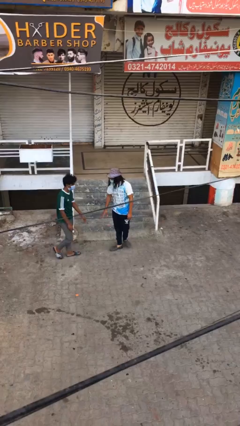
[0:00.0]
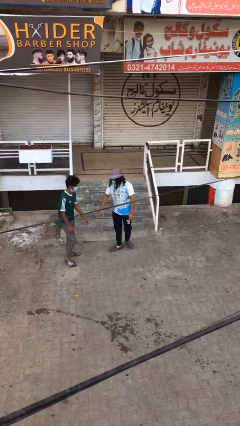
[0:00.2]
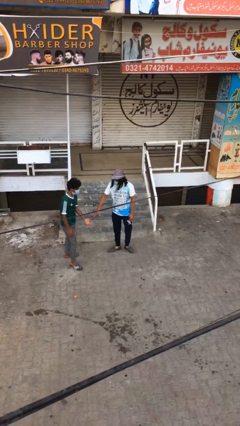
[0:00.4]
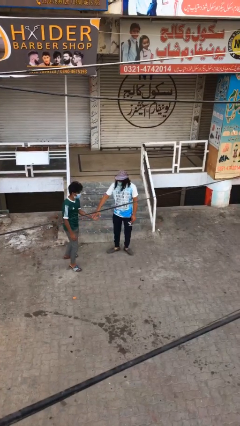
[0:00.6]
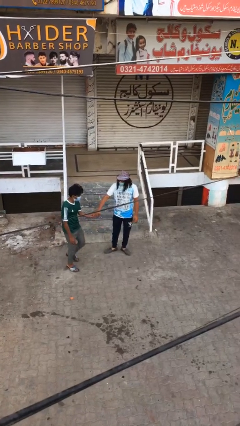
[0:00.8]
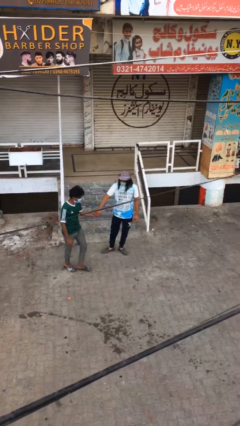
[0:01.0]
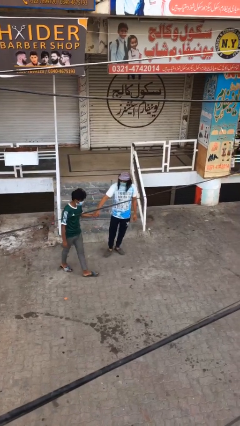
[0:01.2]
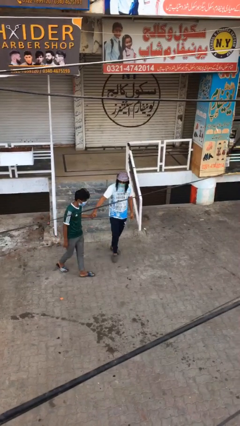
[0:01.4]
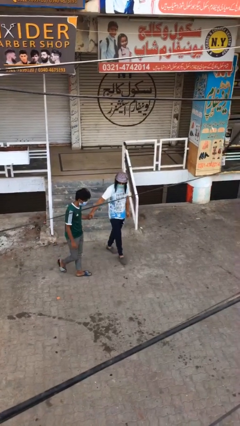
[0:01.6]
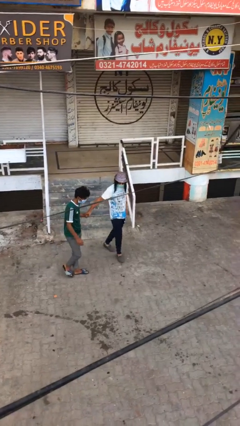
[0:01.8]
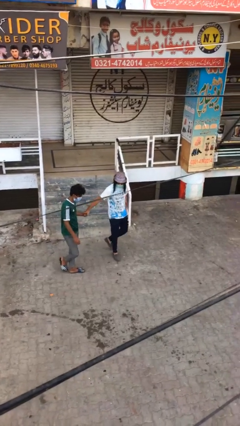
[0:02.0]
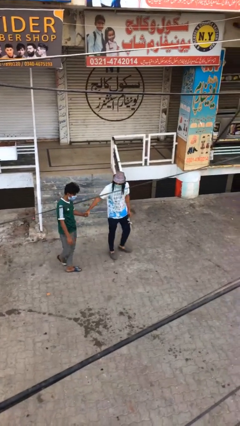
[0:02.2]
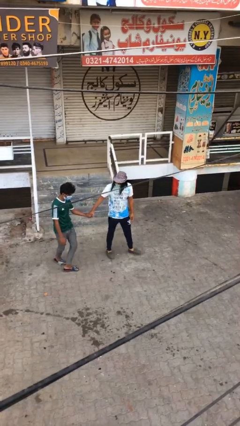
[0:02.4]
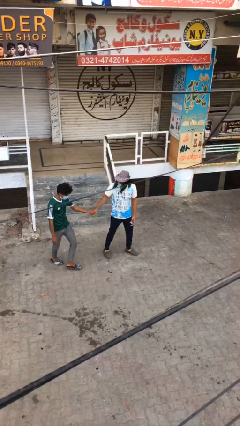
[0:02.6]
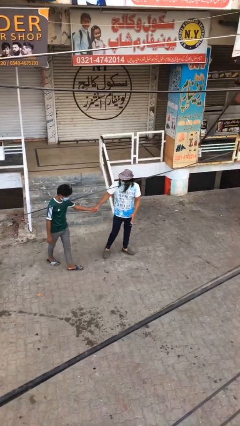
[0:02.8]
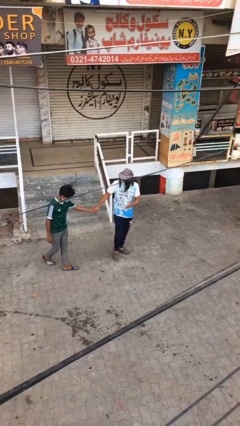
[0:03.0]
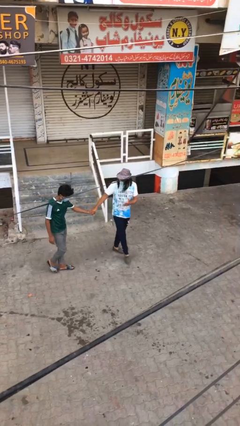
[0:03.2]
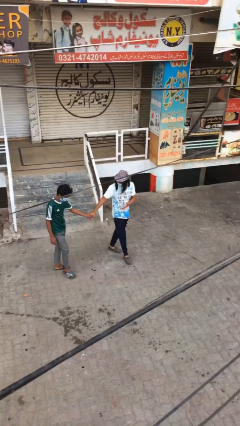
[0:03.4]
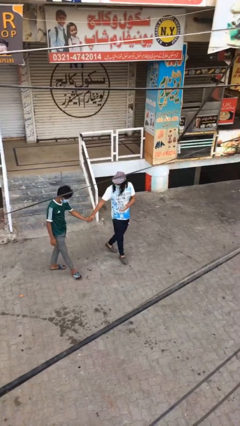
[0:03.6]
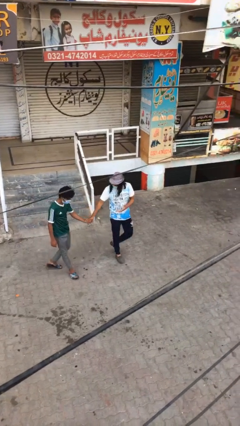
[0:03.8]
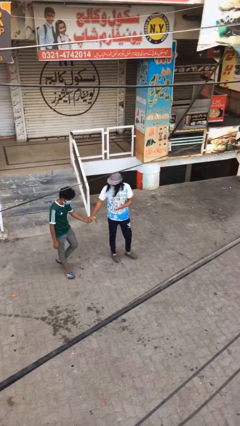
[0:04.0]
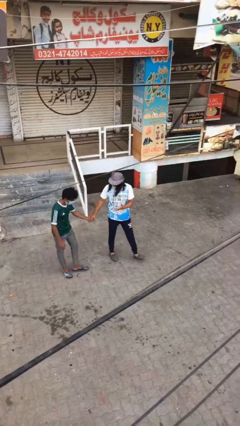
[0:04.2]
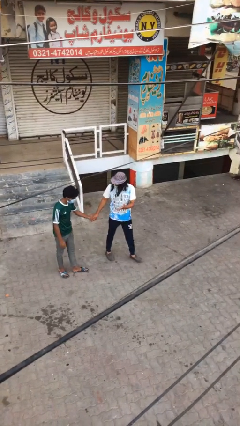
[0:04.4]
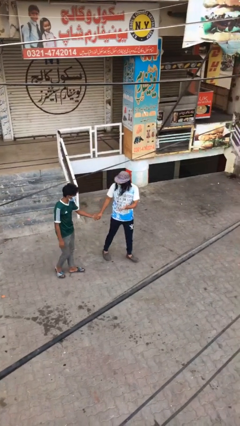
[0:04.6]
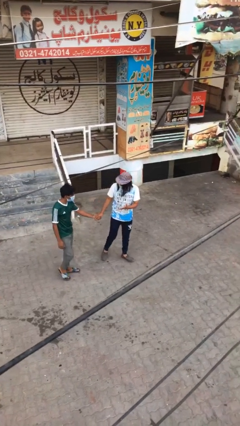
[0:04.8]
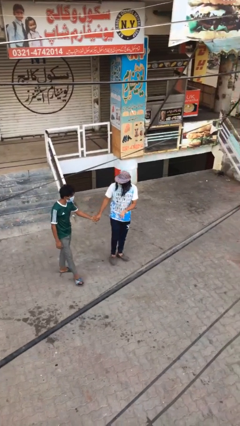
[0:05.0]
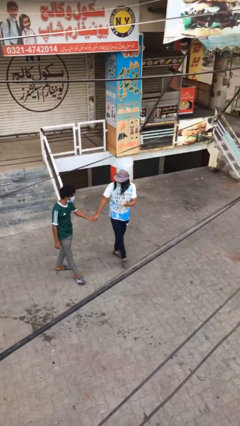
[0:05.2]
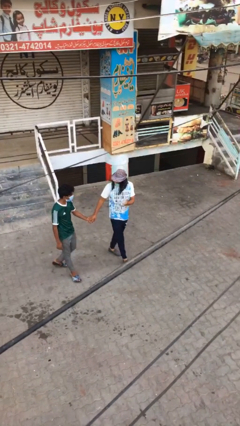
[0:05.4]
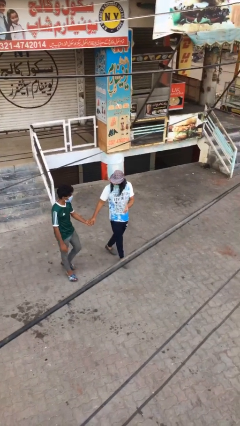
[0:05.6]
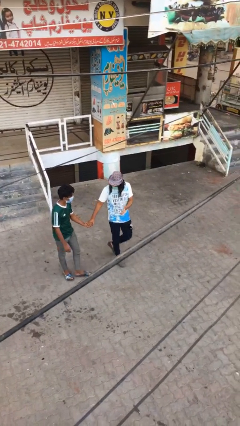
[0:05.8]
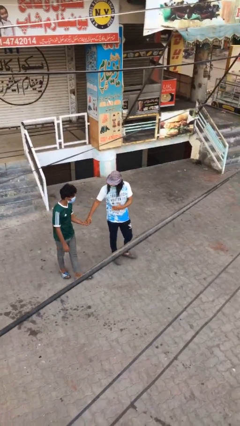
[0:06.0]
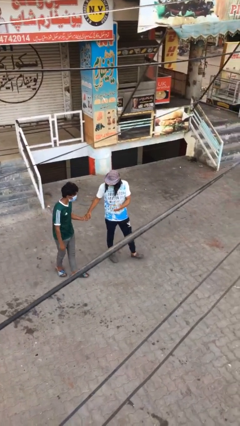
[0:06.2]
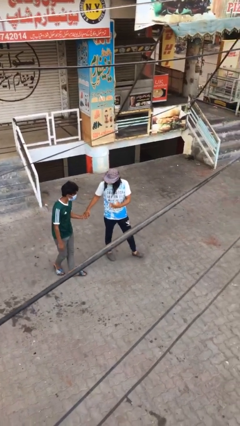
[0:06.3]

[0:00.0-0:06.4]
person holds hand

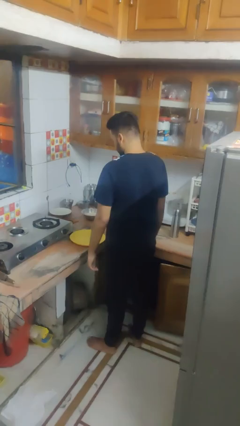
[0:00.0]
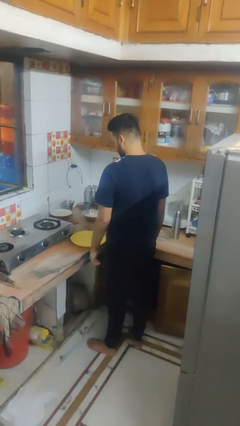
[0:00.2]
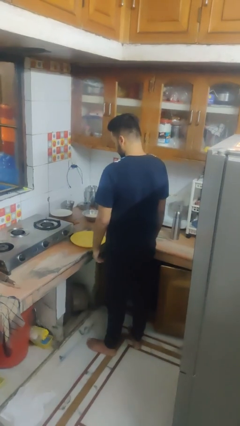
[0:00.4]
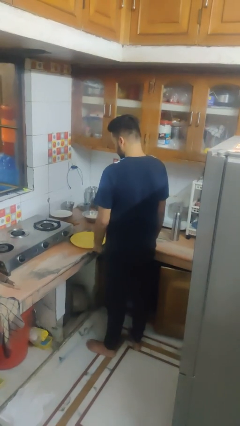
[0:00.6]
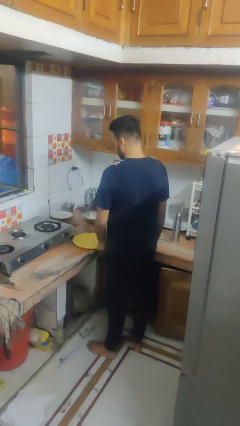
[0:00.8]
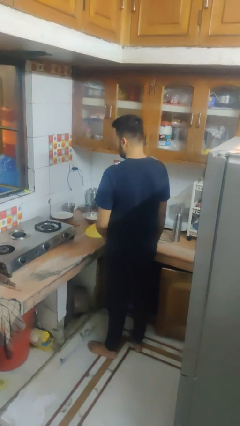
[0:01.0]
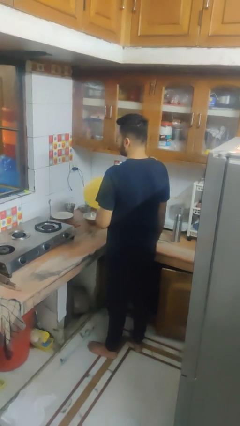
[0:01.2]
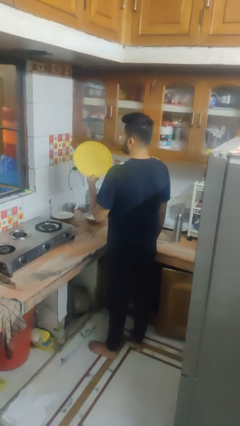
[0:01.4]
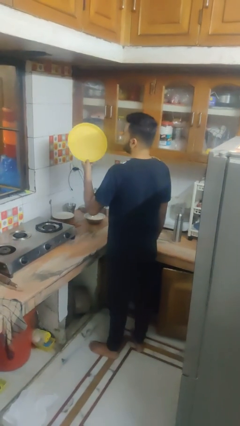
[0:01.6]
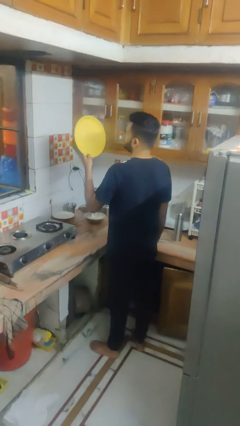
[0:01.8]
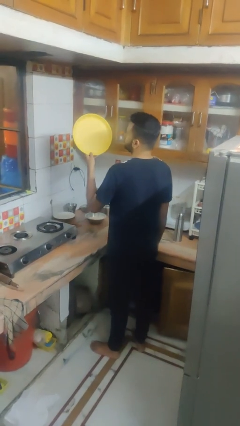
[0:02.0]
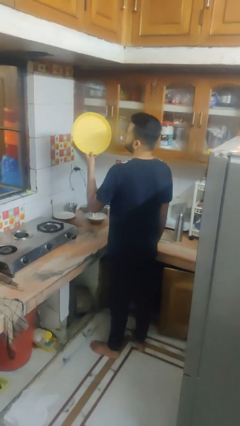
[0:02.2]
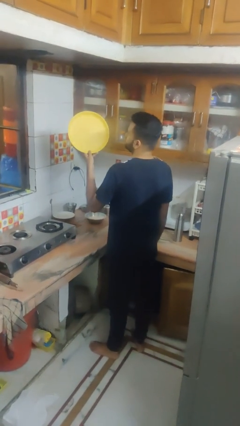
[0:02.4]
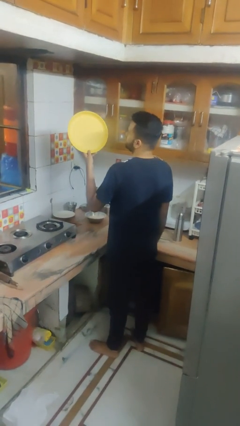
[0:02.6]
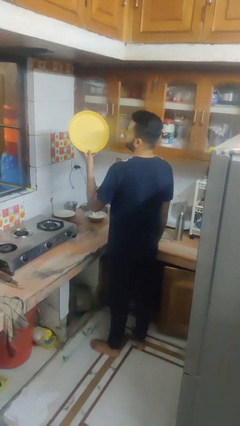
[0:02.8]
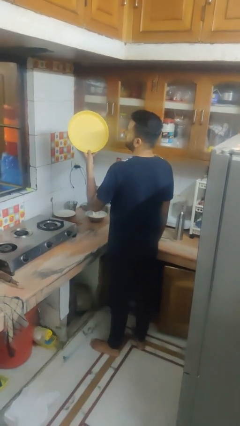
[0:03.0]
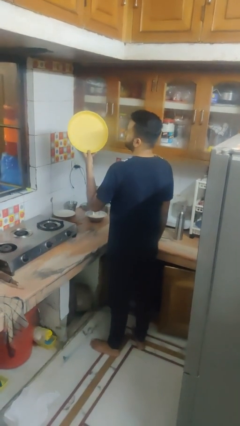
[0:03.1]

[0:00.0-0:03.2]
person picks up object from countertop

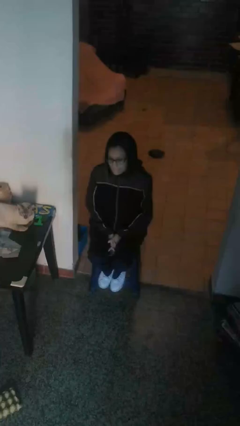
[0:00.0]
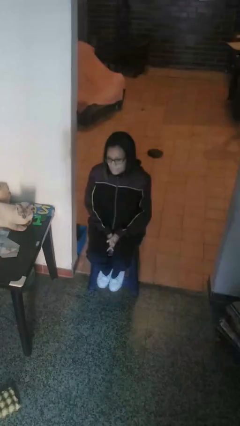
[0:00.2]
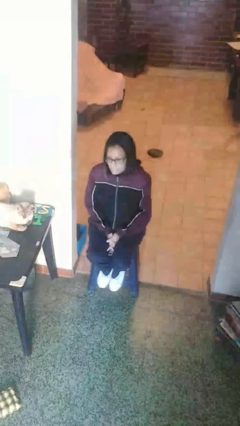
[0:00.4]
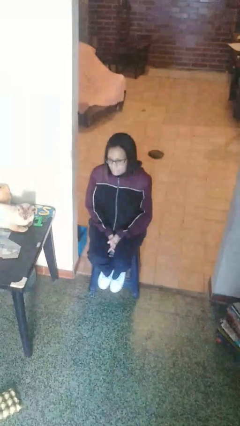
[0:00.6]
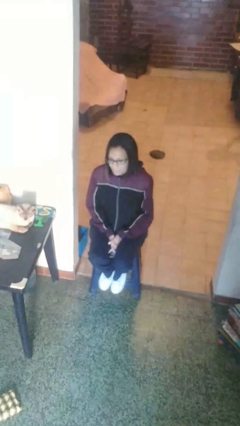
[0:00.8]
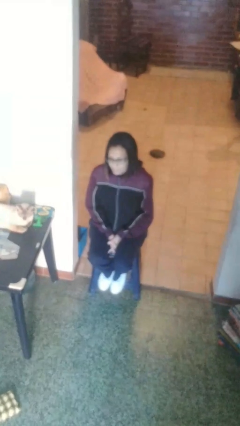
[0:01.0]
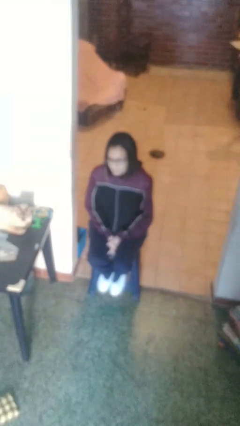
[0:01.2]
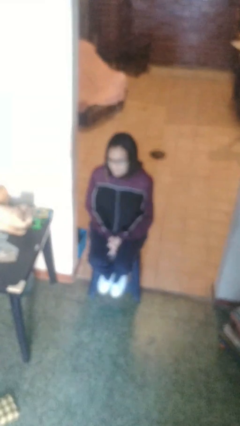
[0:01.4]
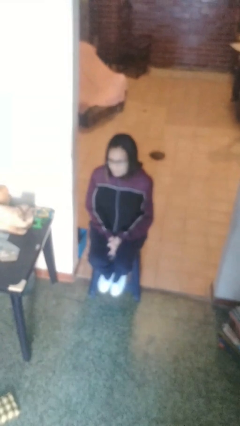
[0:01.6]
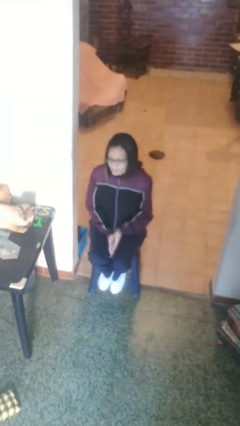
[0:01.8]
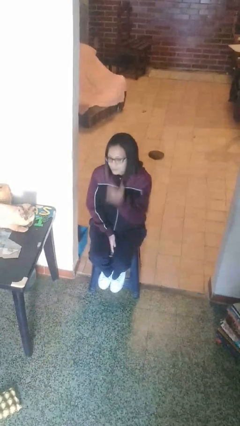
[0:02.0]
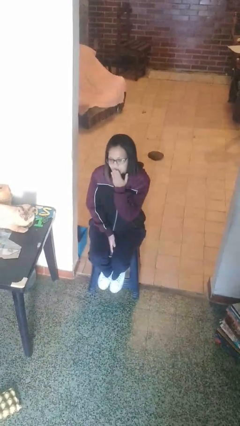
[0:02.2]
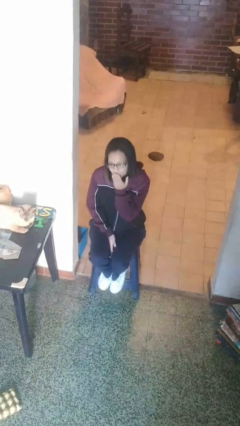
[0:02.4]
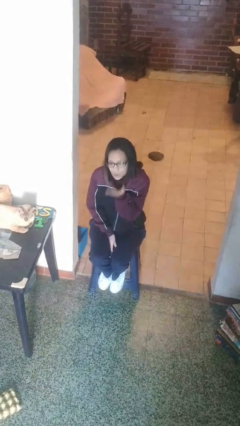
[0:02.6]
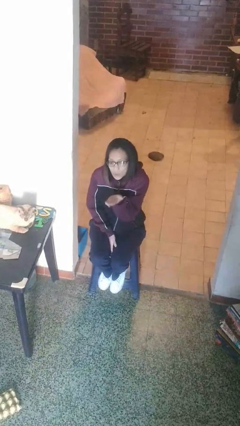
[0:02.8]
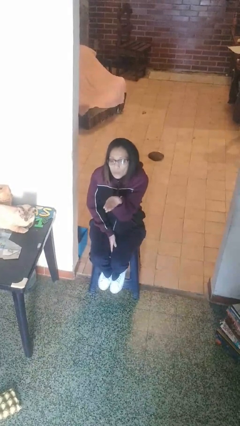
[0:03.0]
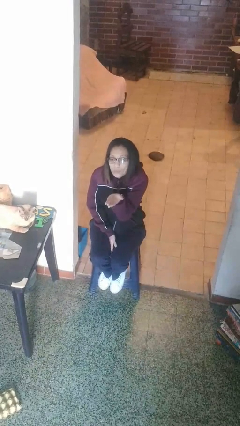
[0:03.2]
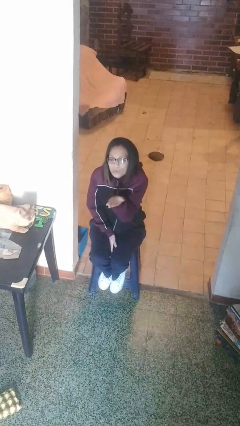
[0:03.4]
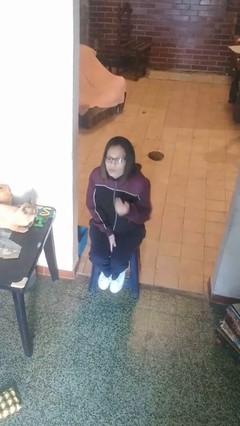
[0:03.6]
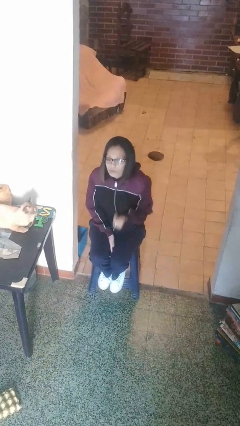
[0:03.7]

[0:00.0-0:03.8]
person gestures blow kiss

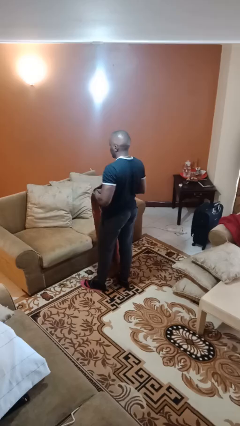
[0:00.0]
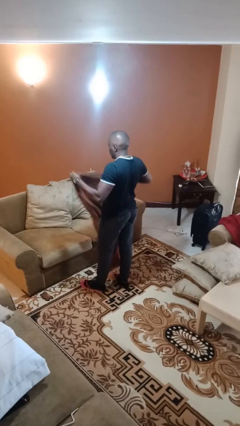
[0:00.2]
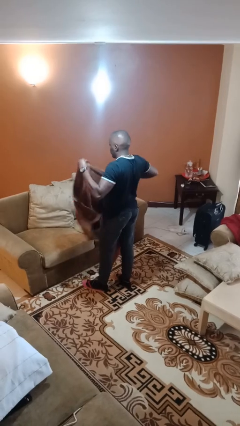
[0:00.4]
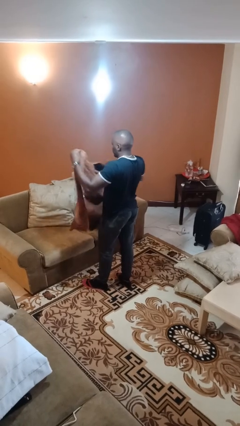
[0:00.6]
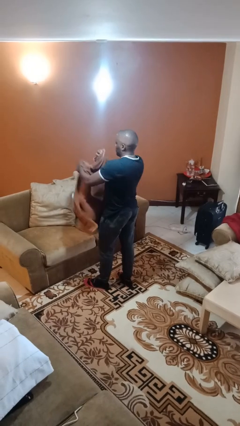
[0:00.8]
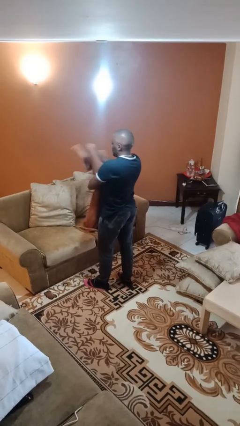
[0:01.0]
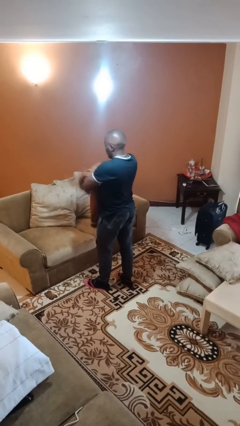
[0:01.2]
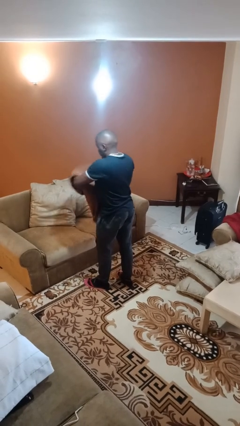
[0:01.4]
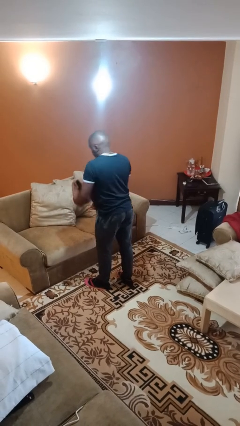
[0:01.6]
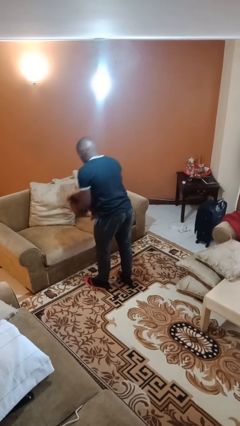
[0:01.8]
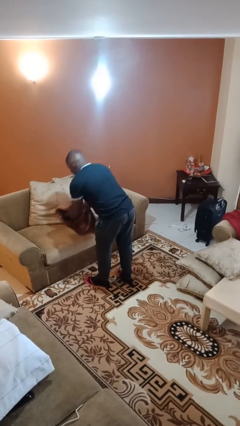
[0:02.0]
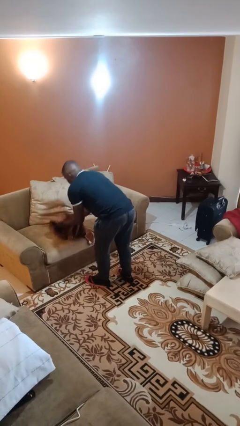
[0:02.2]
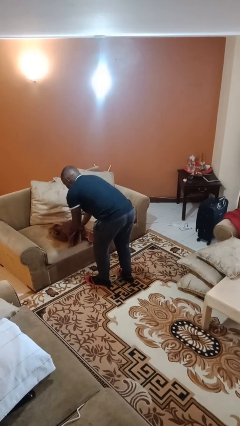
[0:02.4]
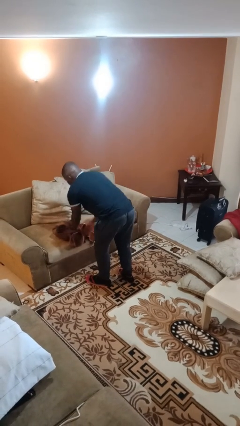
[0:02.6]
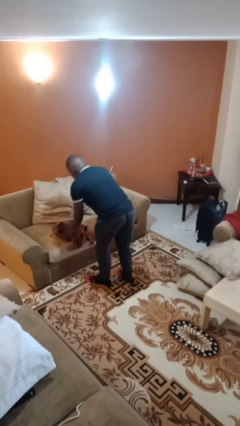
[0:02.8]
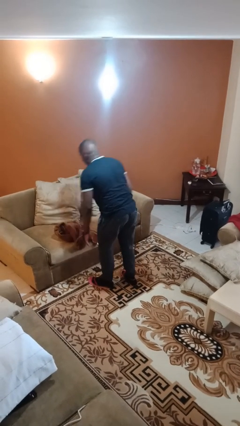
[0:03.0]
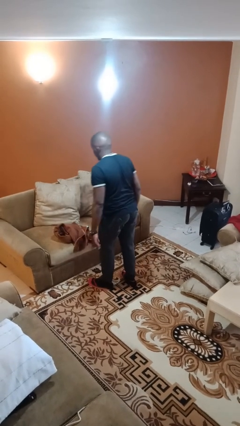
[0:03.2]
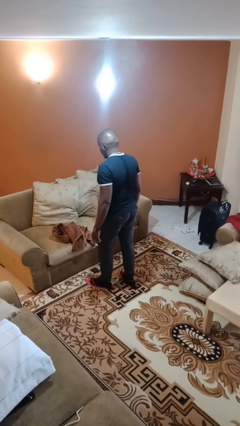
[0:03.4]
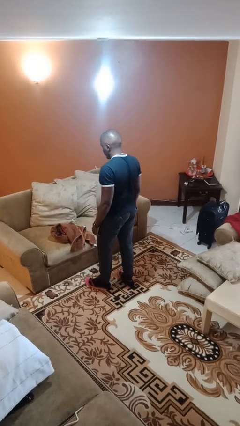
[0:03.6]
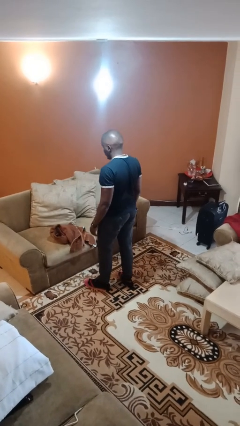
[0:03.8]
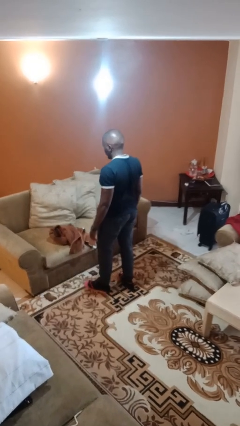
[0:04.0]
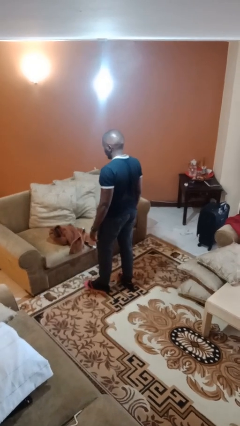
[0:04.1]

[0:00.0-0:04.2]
person folds towel
